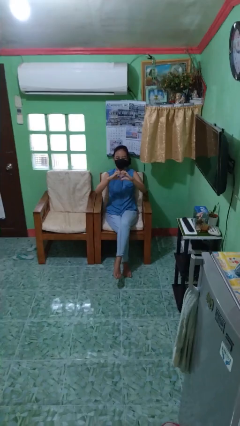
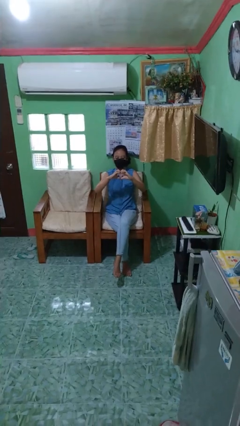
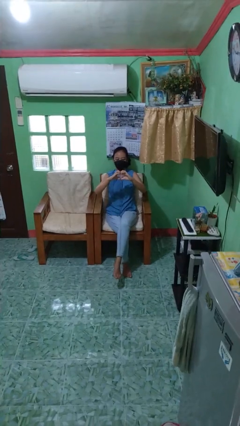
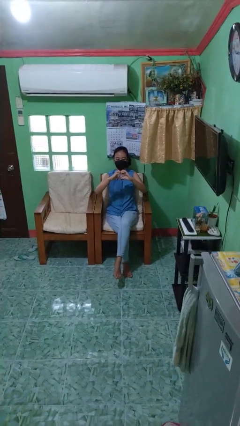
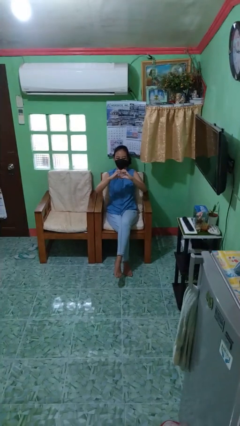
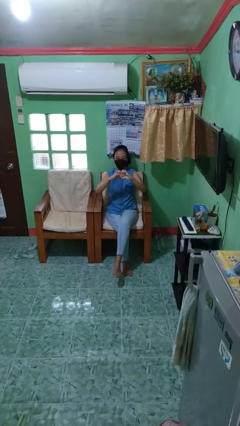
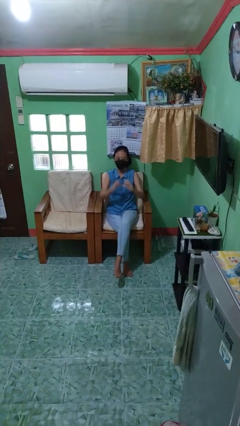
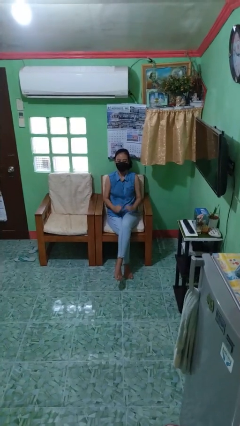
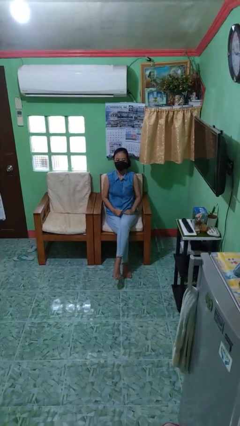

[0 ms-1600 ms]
person gestures heart

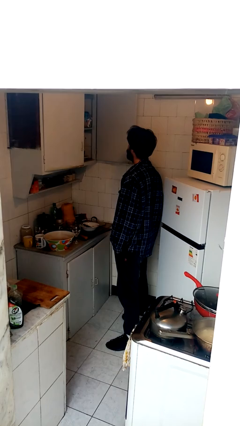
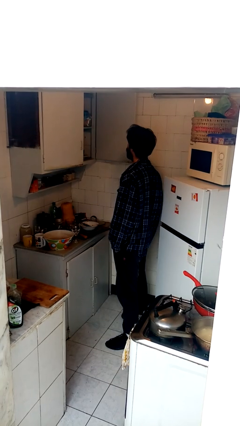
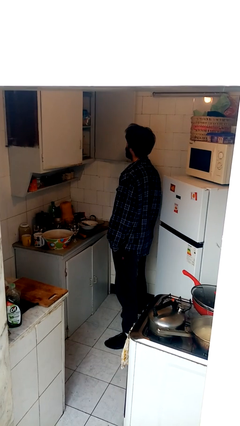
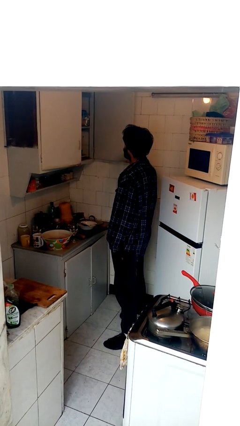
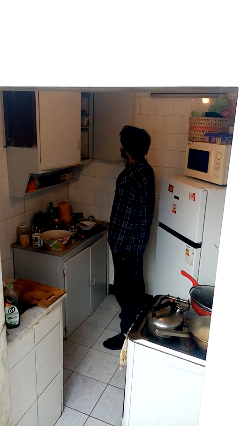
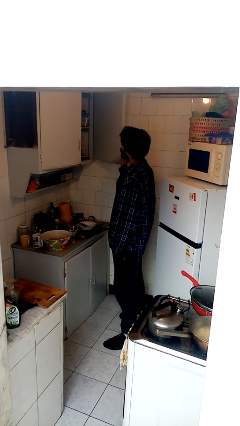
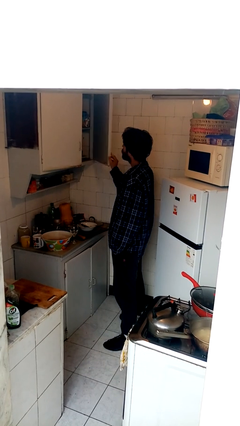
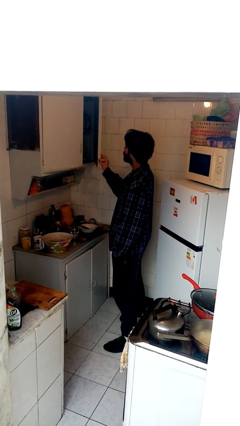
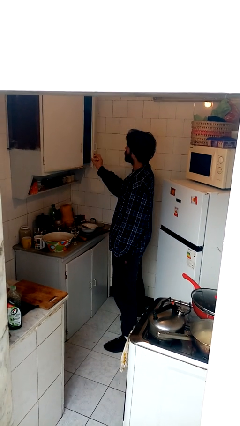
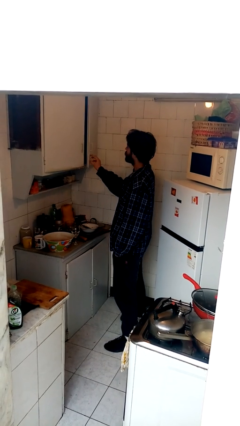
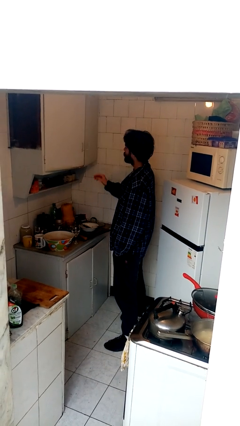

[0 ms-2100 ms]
person closes cabinet

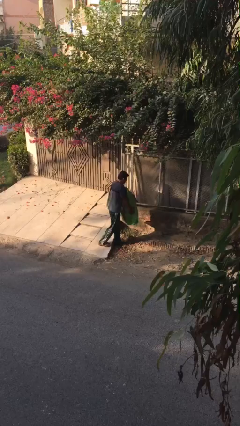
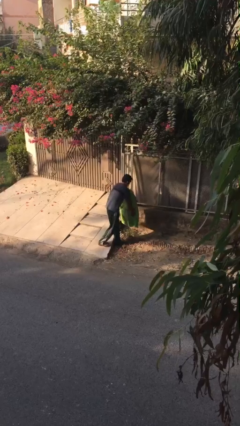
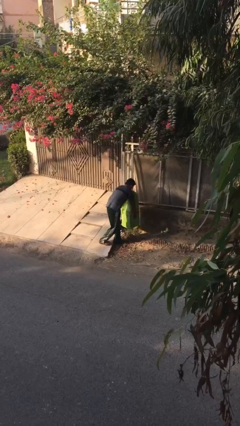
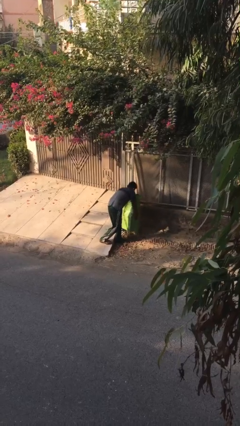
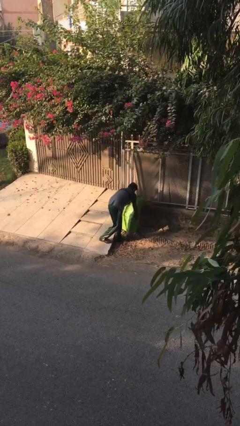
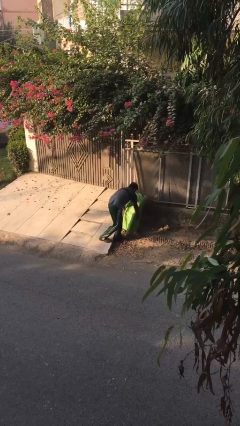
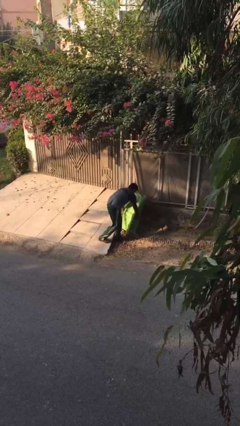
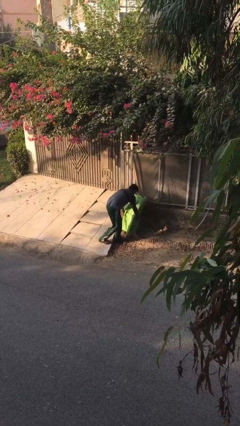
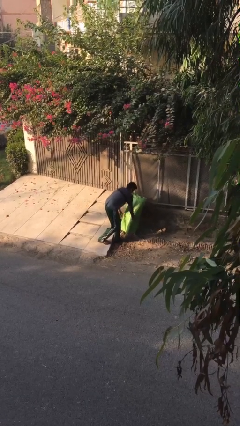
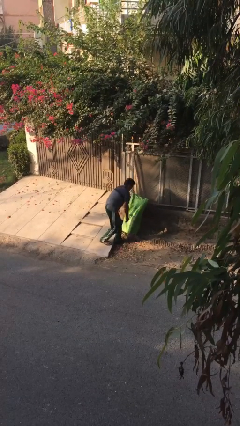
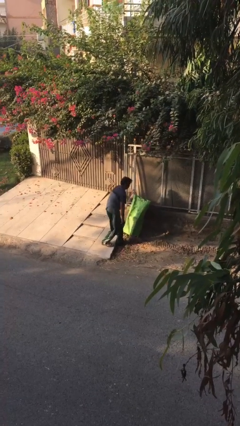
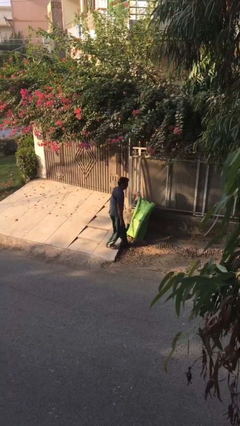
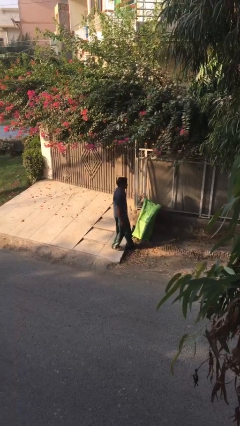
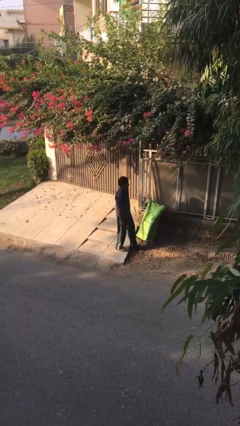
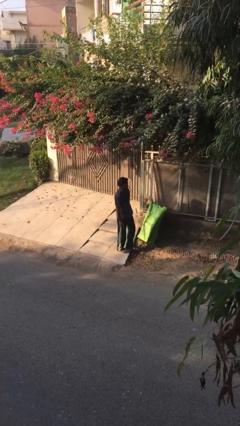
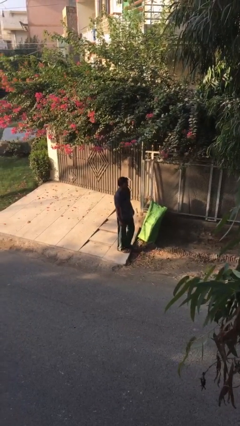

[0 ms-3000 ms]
person puts down object on floor

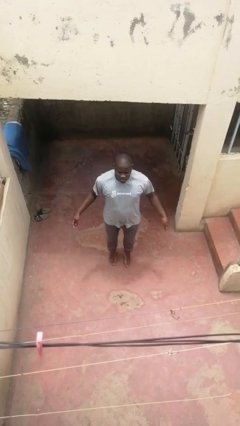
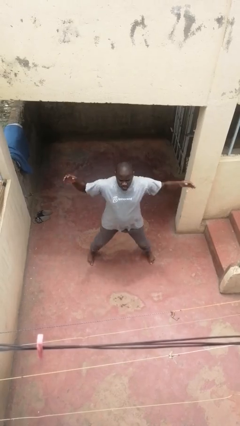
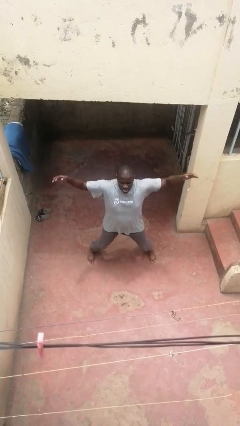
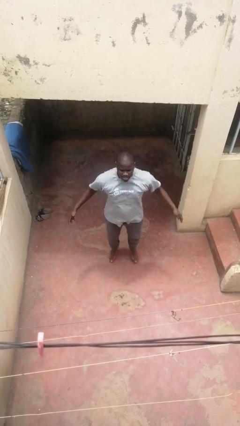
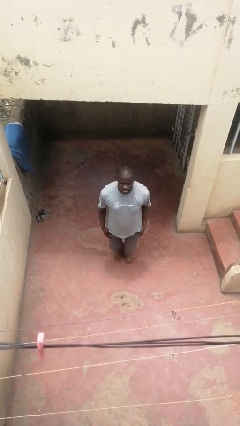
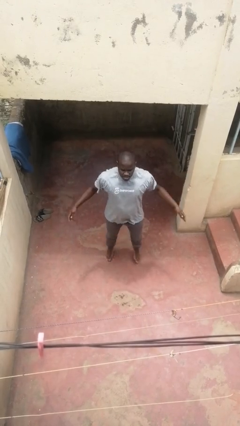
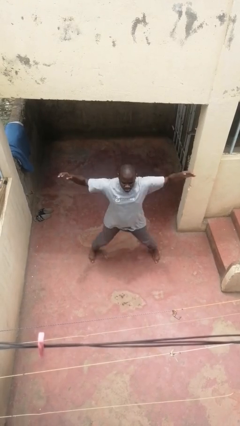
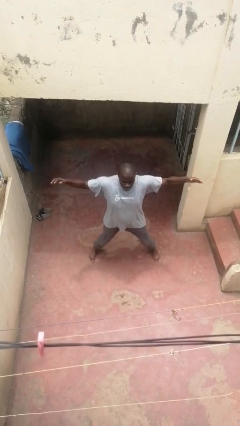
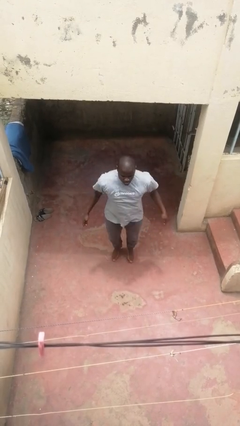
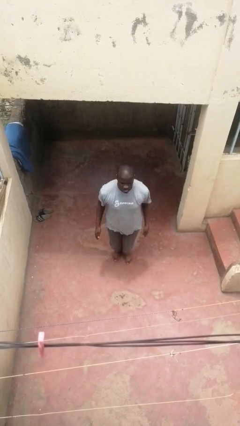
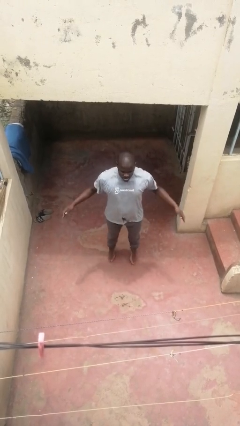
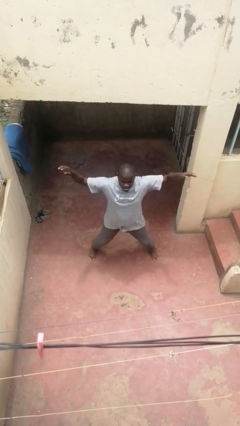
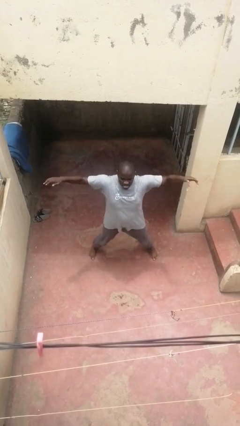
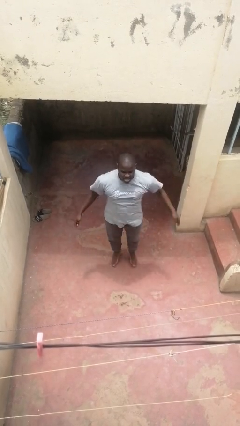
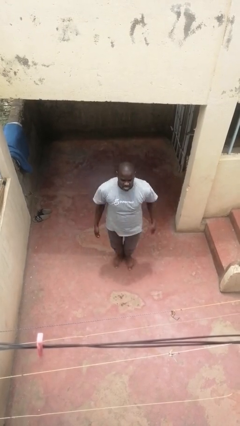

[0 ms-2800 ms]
person exercises with jumping jacks

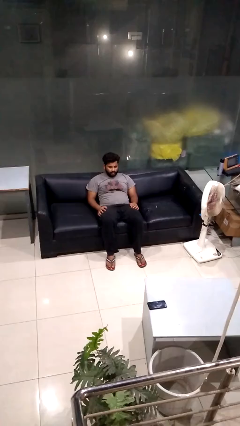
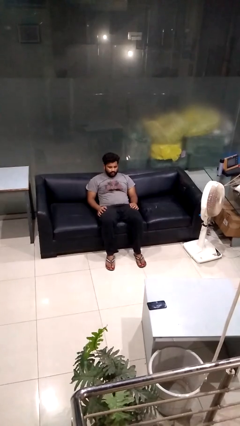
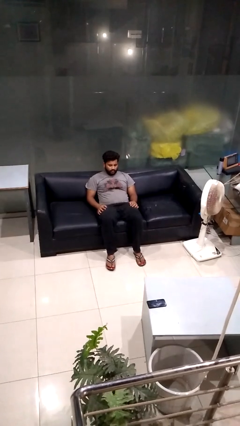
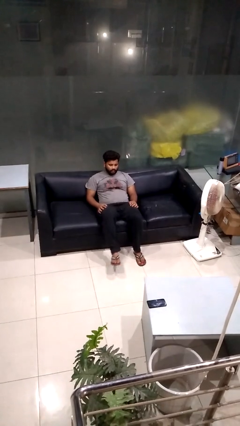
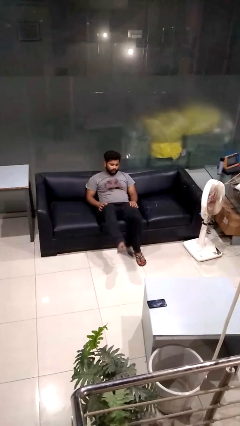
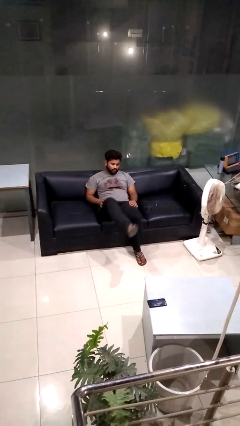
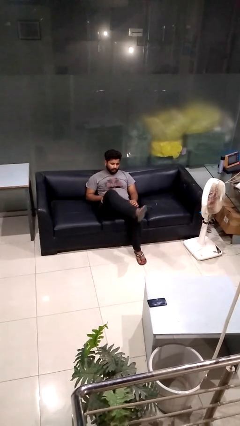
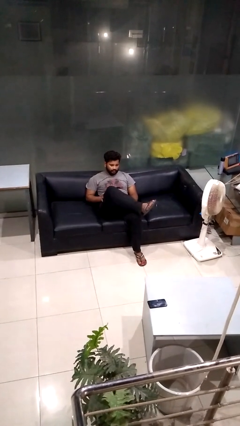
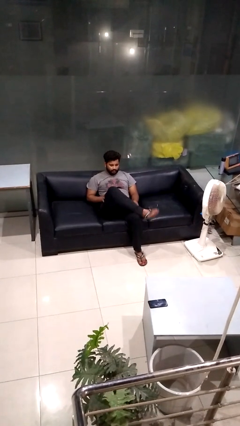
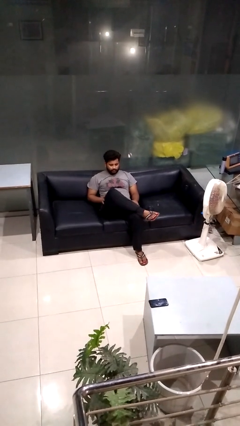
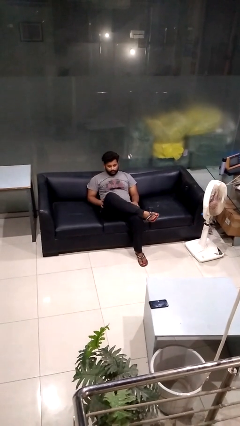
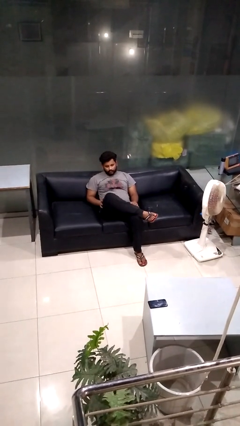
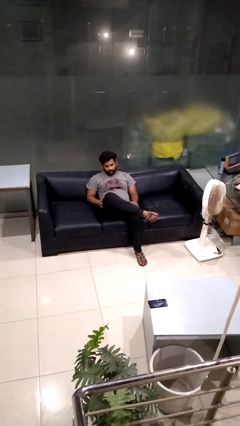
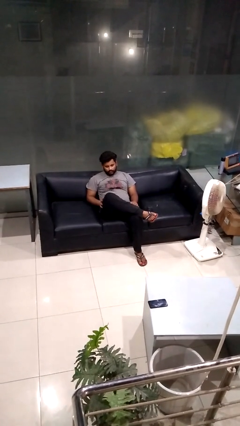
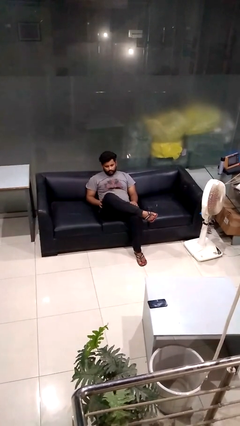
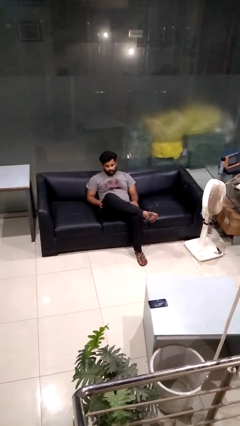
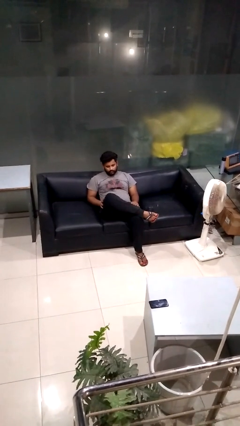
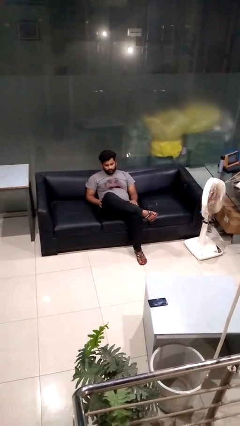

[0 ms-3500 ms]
person crosses legs

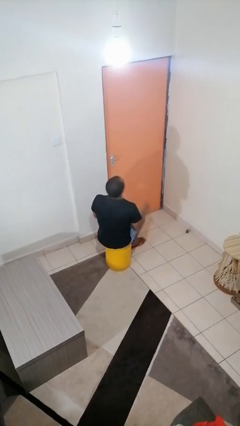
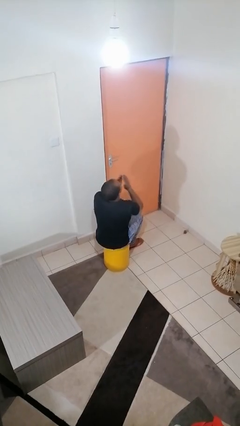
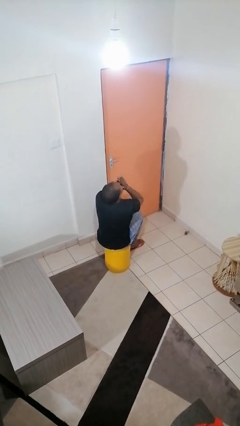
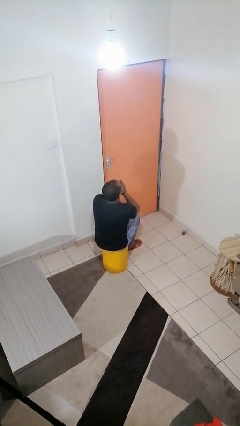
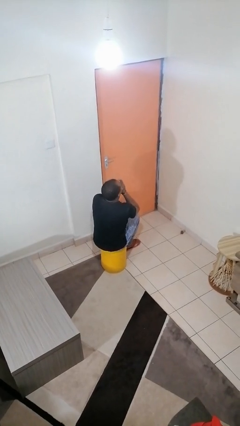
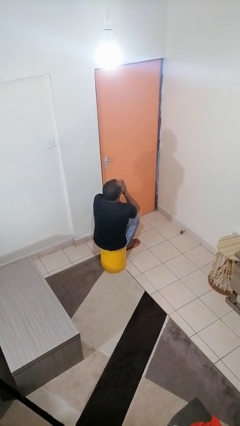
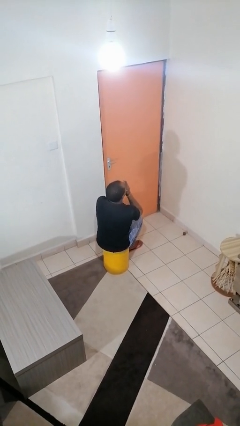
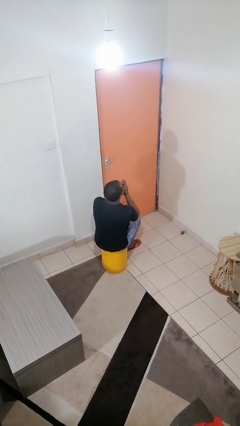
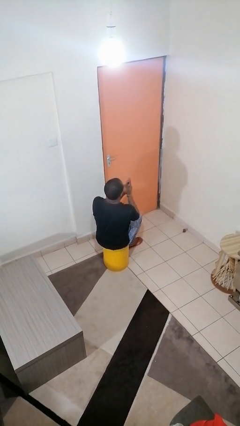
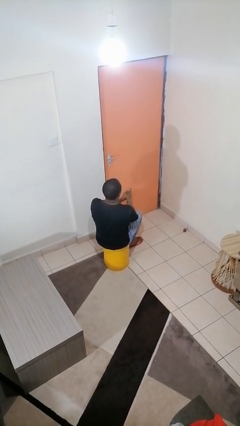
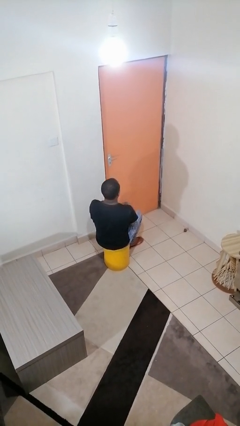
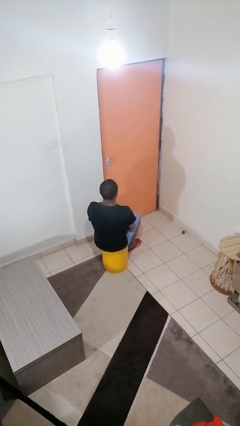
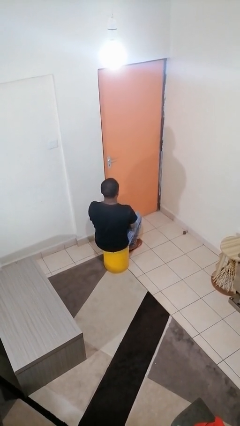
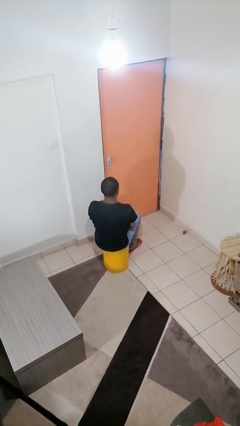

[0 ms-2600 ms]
person sneezes into hand

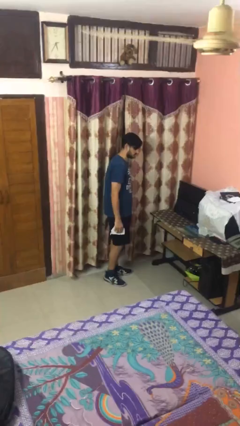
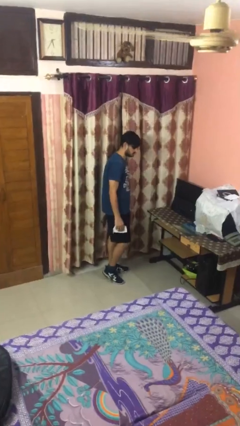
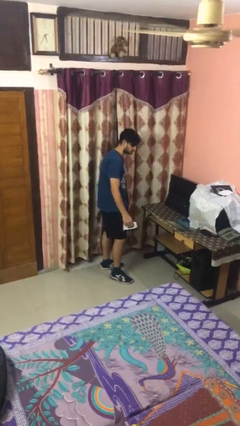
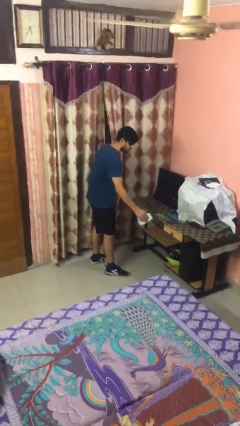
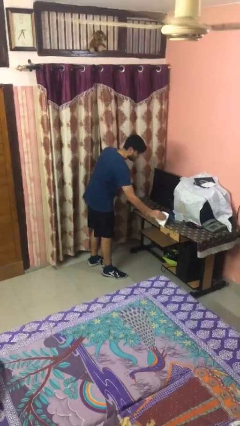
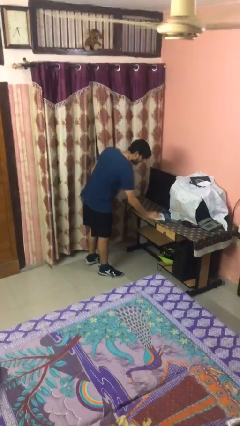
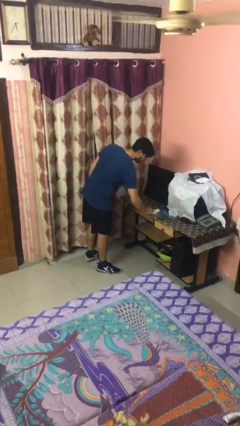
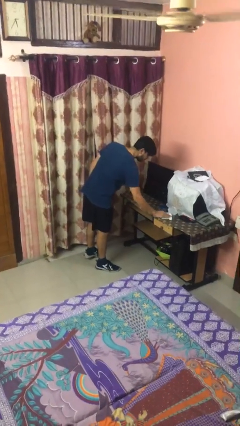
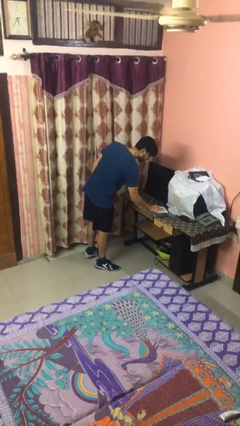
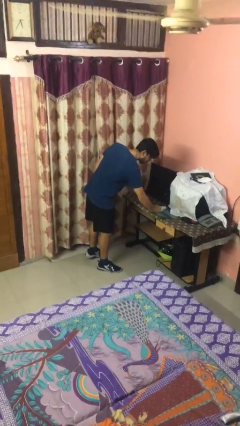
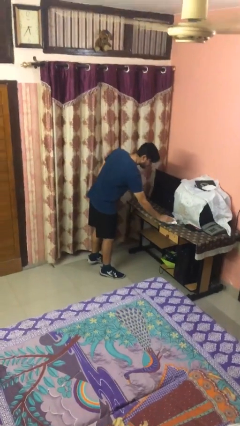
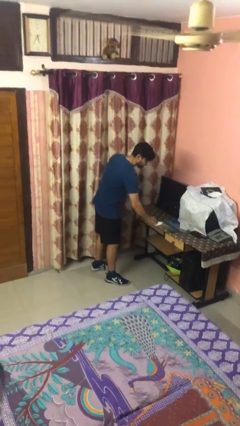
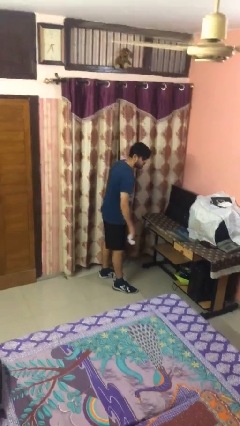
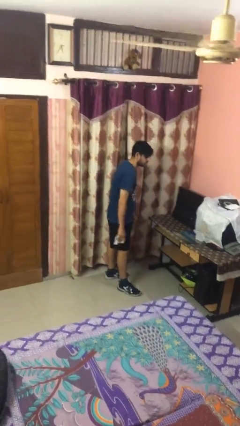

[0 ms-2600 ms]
person cleans table with rag
